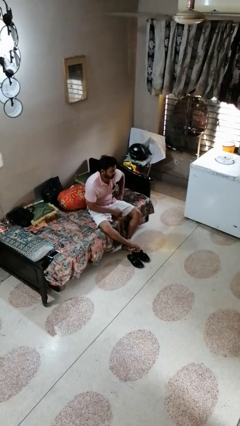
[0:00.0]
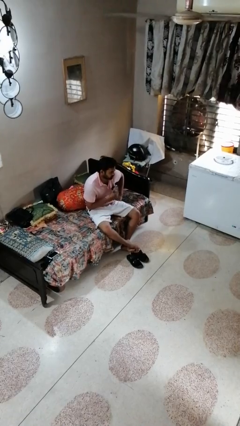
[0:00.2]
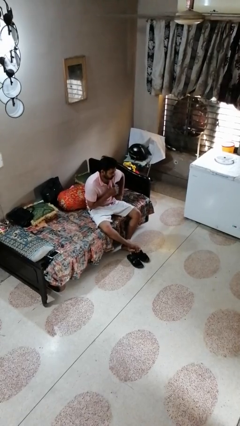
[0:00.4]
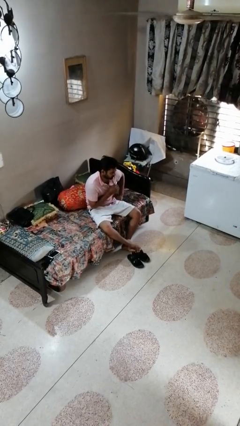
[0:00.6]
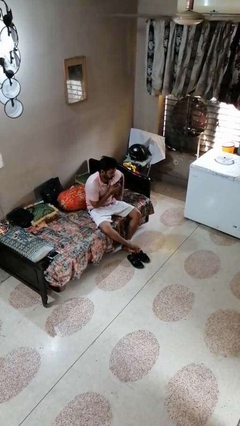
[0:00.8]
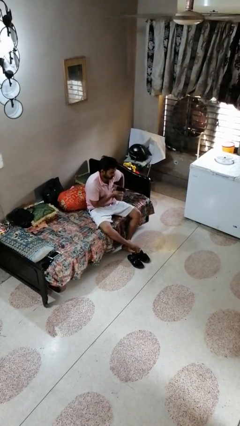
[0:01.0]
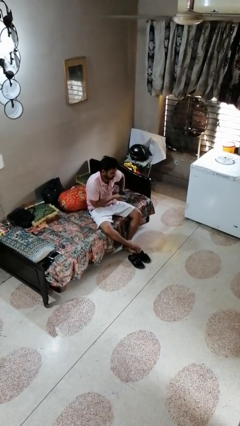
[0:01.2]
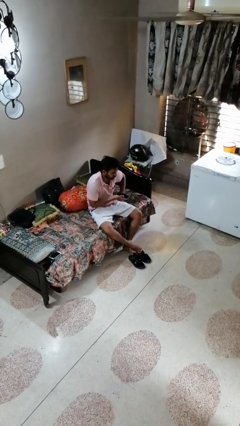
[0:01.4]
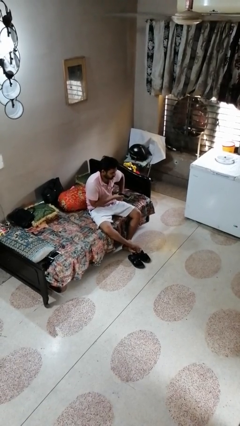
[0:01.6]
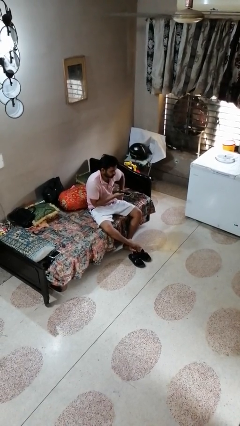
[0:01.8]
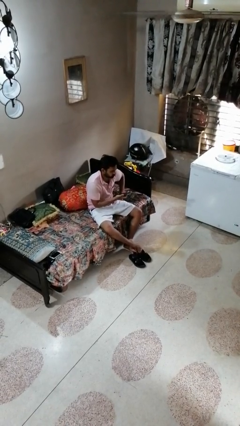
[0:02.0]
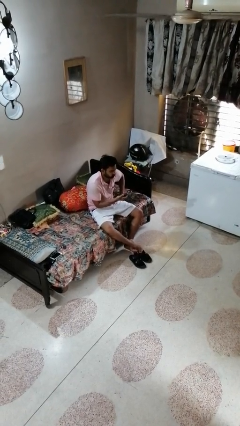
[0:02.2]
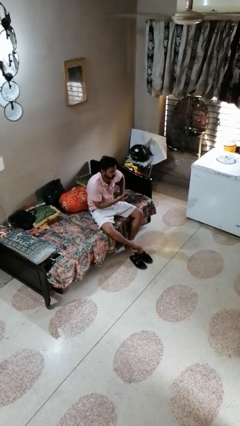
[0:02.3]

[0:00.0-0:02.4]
person takes phone from pocket

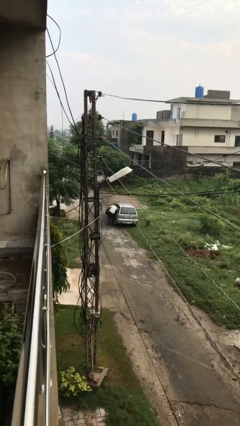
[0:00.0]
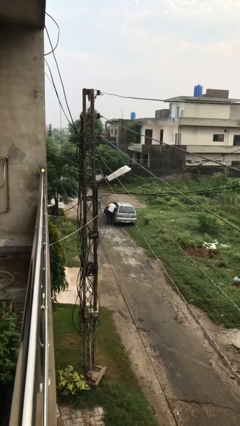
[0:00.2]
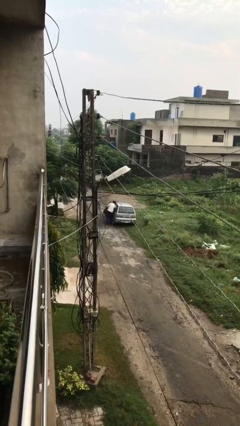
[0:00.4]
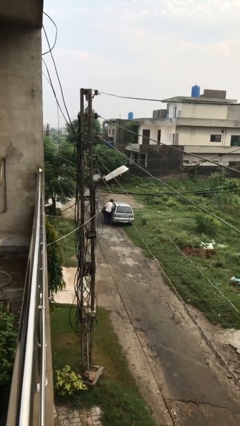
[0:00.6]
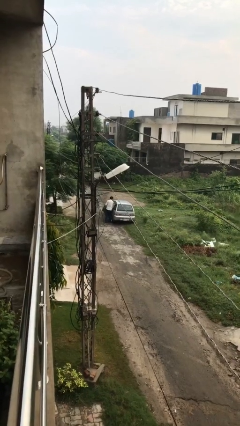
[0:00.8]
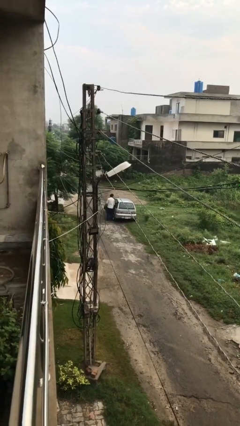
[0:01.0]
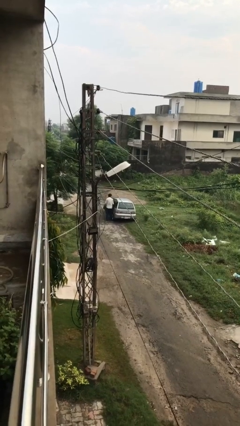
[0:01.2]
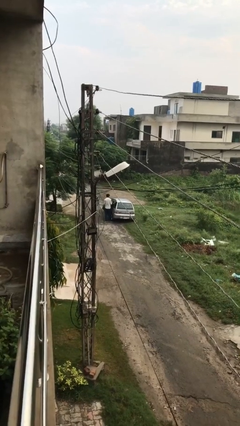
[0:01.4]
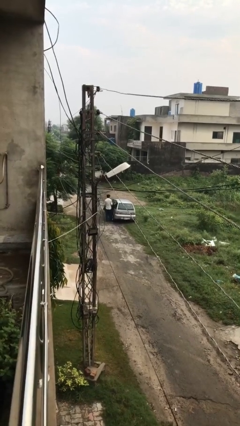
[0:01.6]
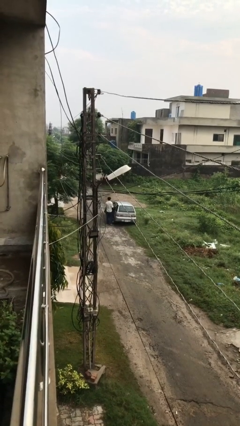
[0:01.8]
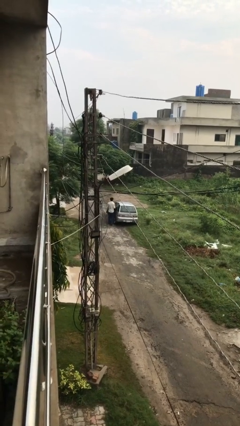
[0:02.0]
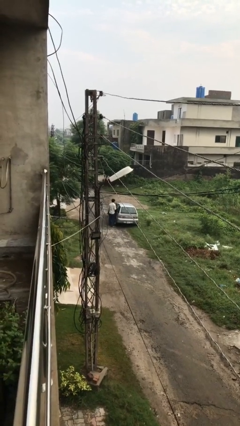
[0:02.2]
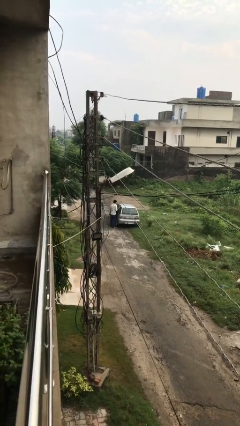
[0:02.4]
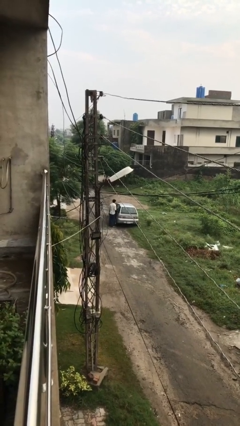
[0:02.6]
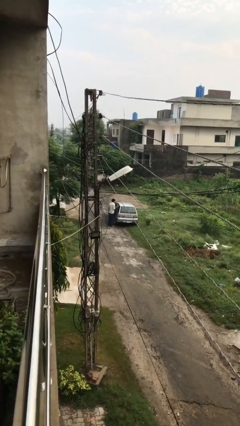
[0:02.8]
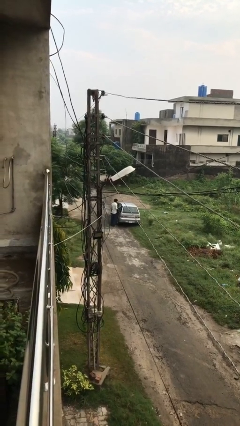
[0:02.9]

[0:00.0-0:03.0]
person unloads car

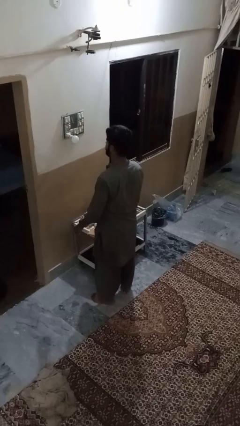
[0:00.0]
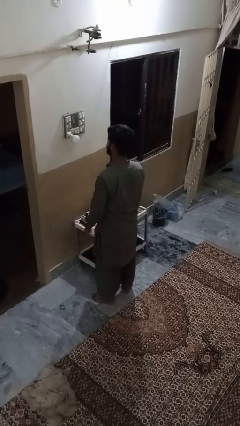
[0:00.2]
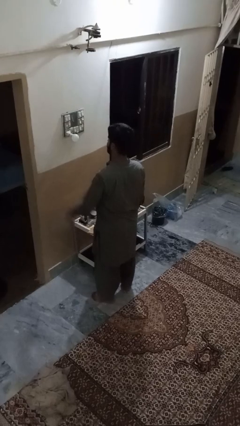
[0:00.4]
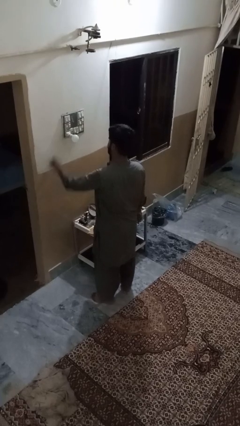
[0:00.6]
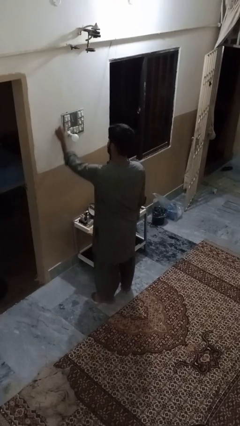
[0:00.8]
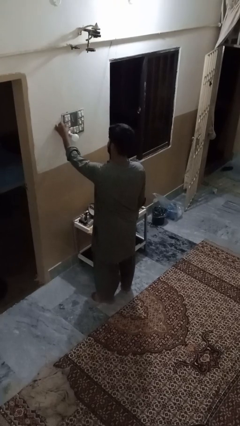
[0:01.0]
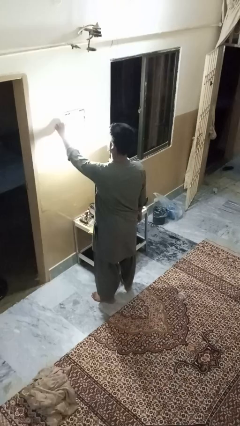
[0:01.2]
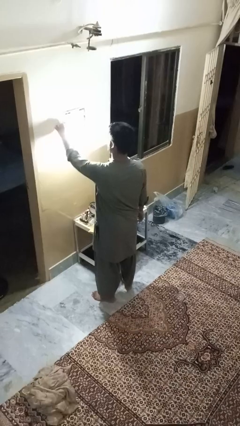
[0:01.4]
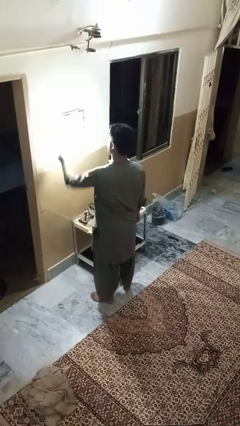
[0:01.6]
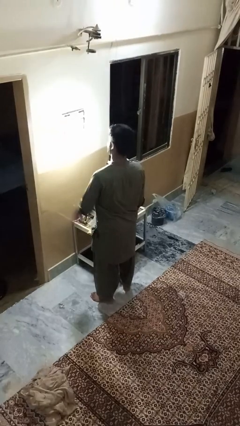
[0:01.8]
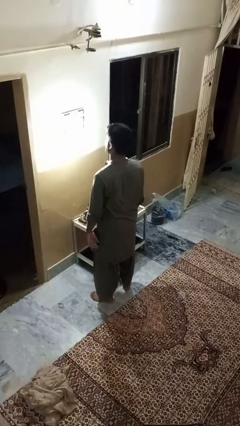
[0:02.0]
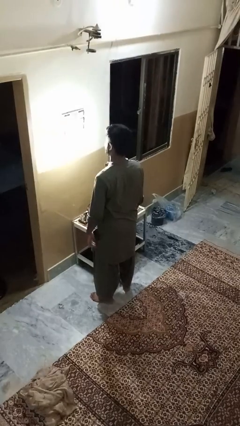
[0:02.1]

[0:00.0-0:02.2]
person turns on lamp

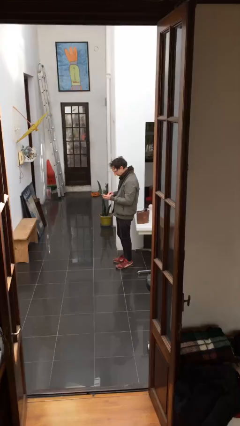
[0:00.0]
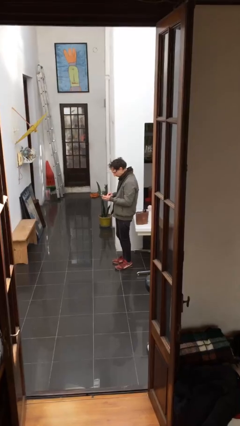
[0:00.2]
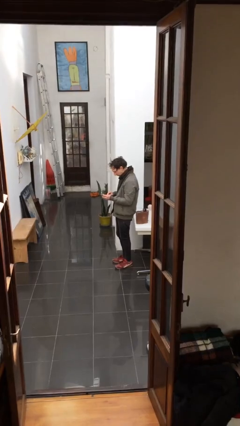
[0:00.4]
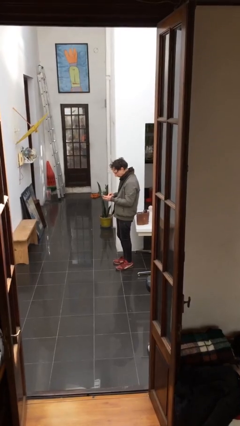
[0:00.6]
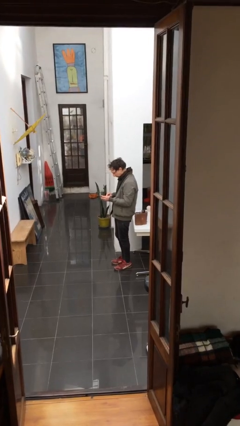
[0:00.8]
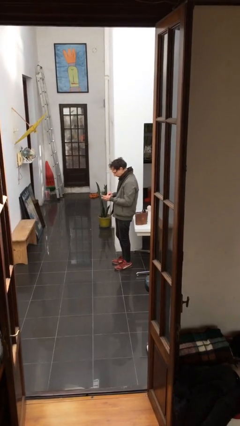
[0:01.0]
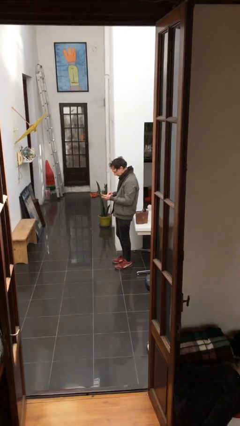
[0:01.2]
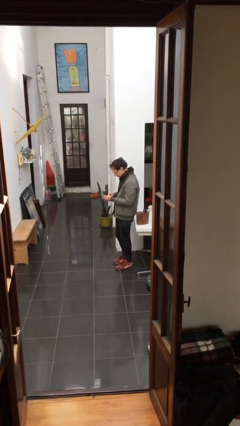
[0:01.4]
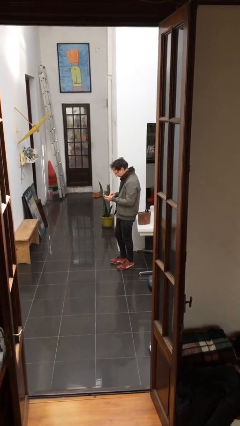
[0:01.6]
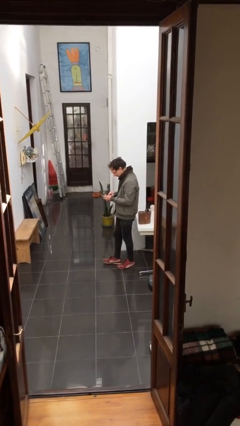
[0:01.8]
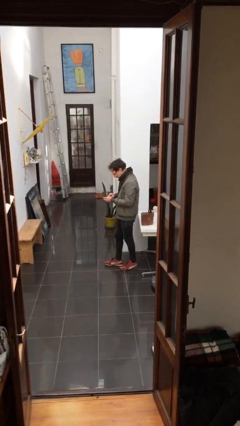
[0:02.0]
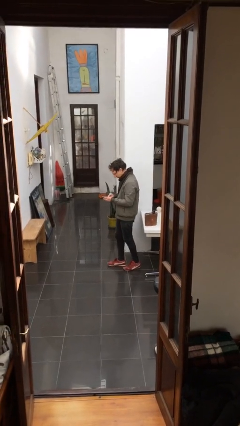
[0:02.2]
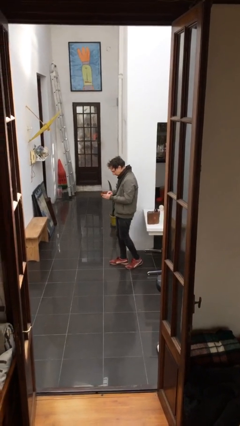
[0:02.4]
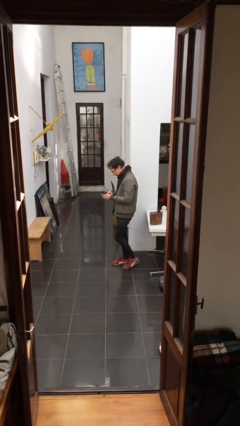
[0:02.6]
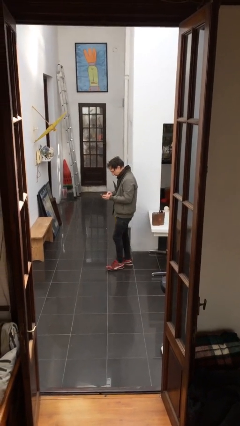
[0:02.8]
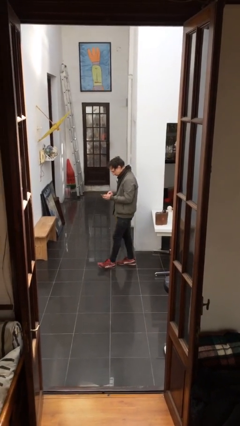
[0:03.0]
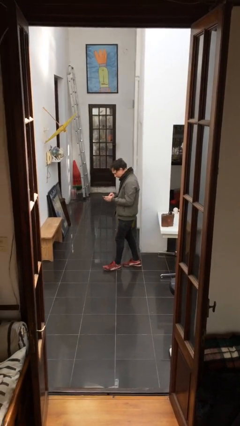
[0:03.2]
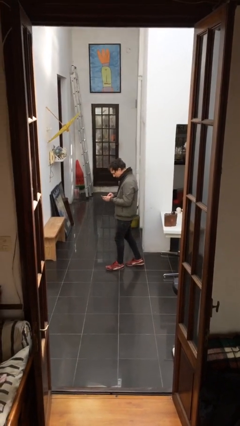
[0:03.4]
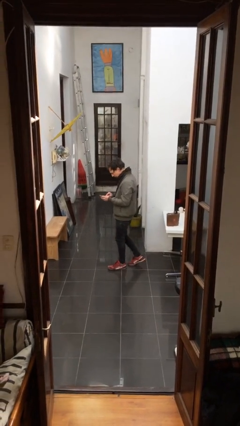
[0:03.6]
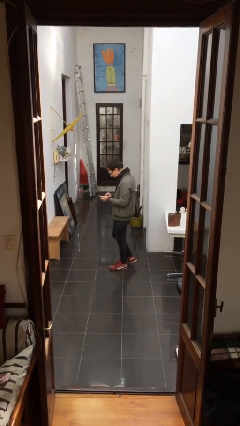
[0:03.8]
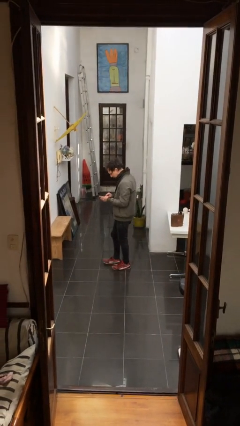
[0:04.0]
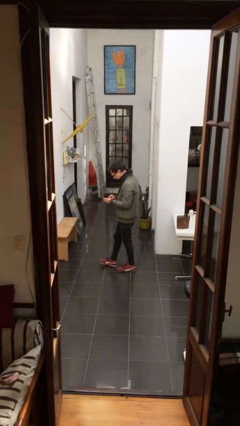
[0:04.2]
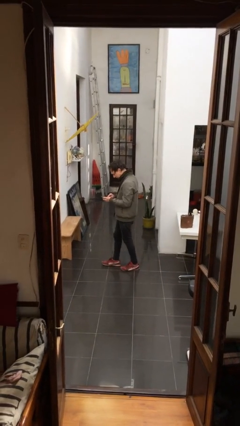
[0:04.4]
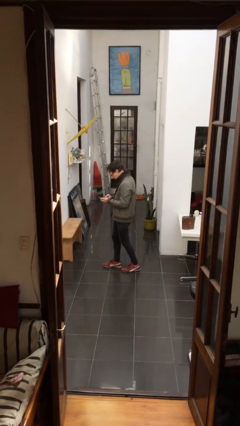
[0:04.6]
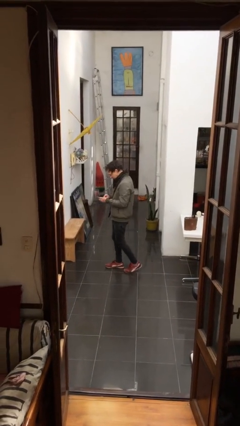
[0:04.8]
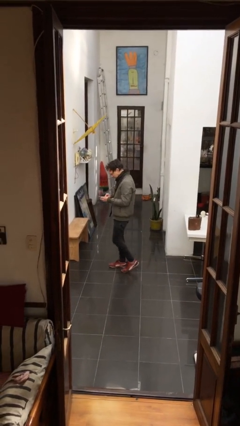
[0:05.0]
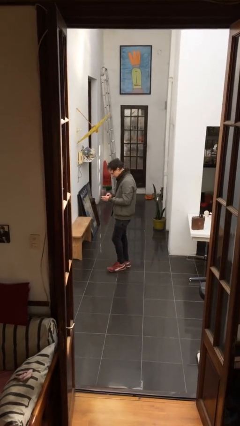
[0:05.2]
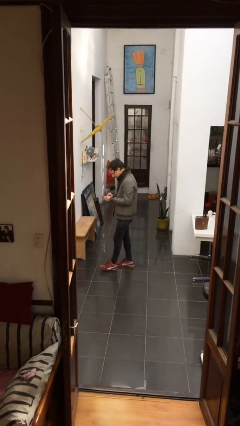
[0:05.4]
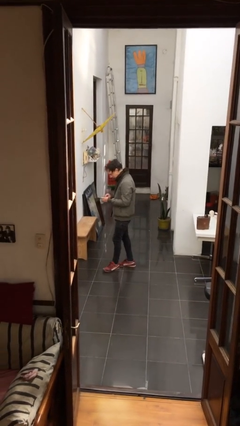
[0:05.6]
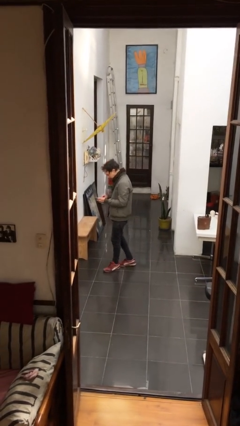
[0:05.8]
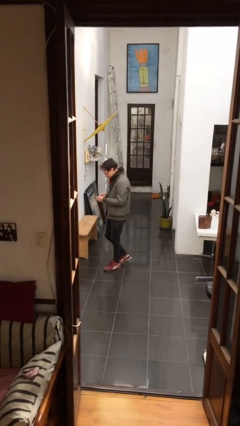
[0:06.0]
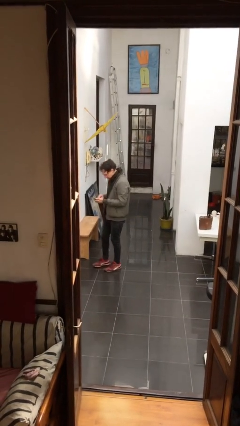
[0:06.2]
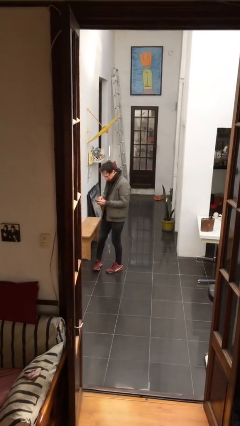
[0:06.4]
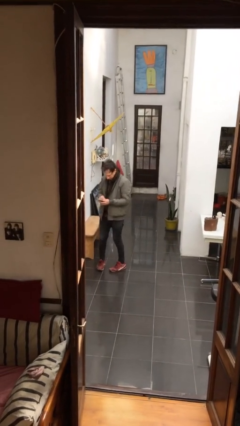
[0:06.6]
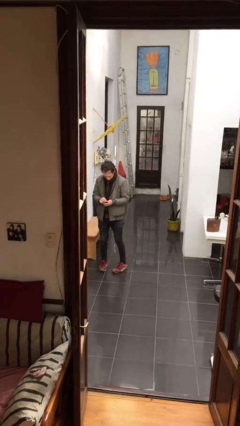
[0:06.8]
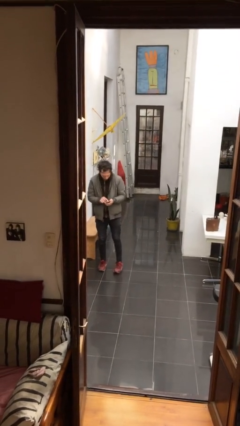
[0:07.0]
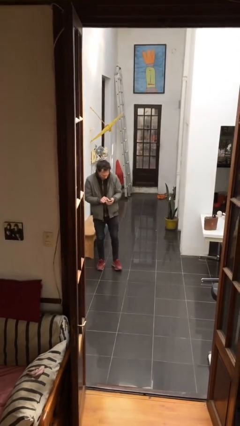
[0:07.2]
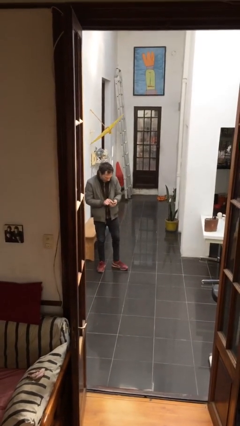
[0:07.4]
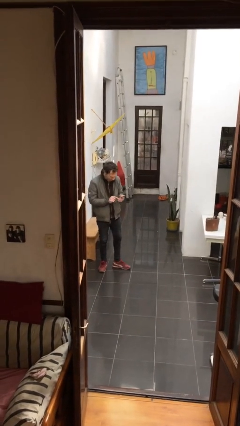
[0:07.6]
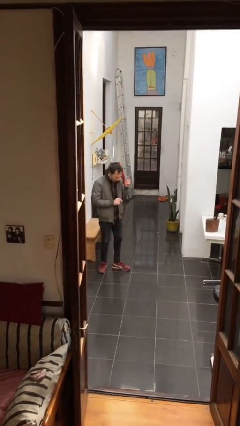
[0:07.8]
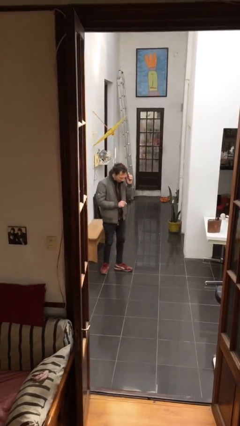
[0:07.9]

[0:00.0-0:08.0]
person texts on phone

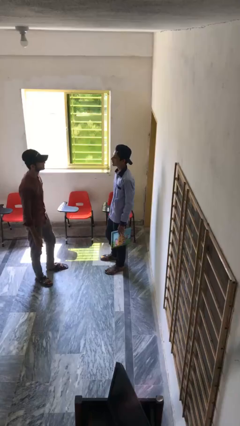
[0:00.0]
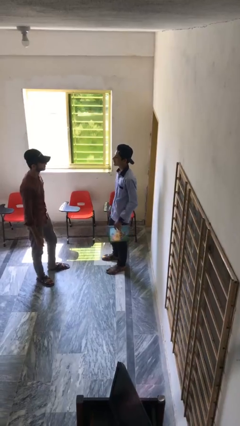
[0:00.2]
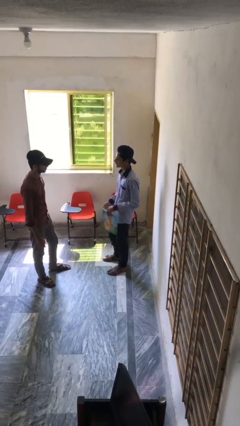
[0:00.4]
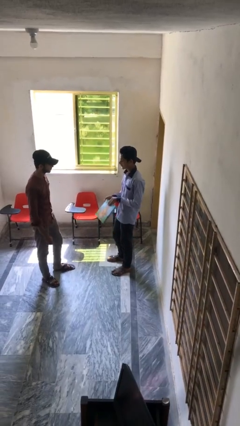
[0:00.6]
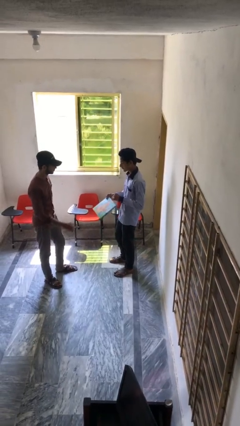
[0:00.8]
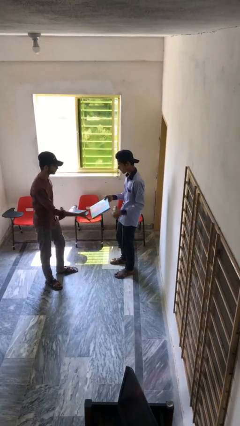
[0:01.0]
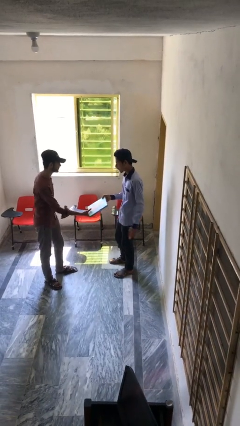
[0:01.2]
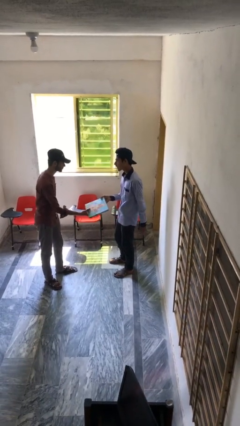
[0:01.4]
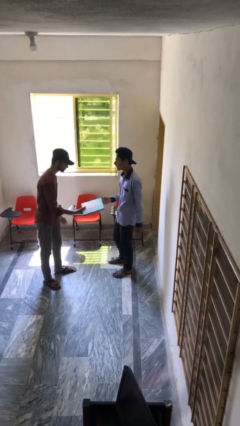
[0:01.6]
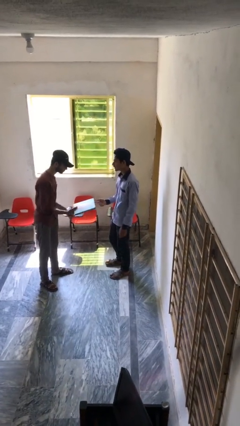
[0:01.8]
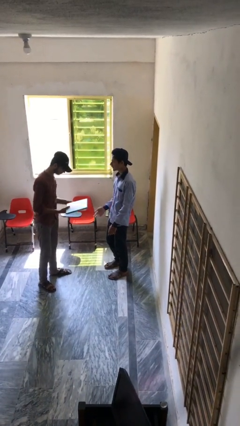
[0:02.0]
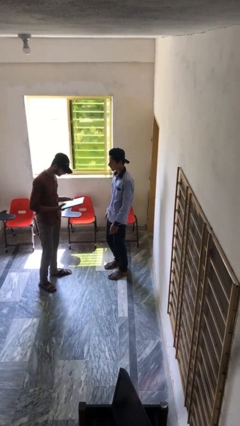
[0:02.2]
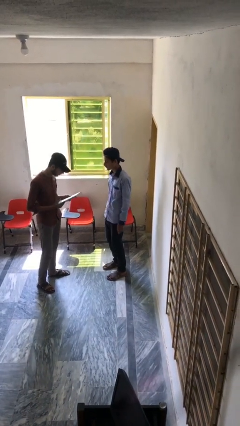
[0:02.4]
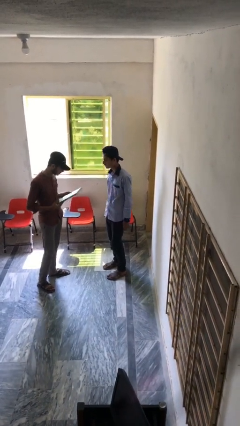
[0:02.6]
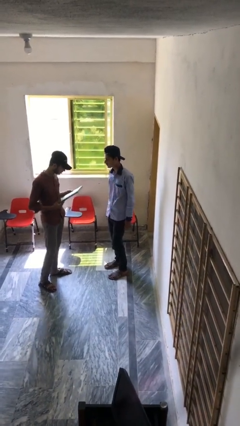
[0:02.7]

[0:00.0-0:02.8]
person transfers object to person
